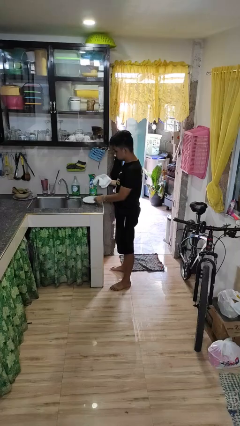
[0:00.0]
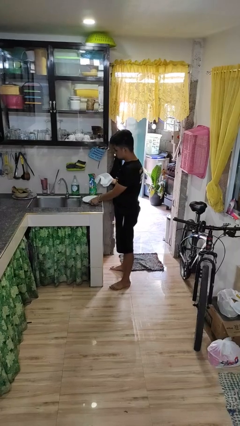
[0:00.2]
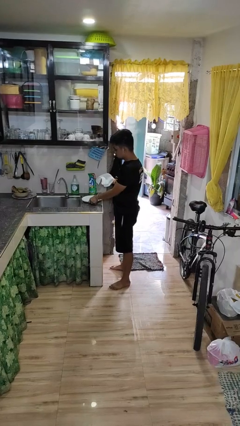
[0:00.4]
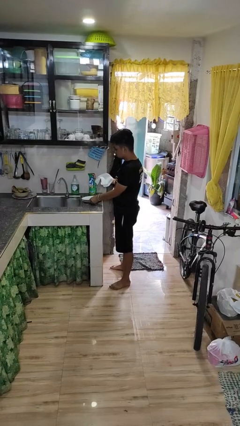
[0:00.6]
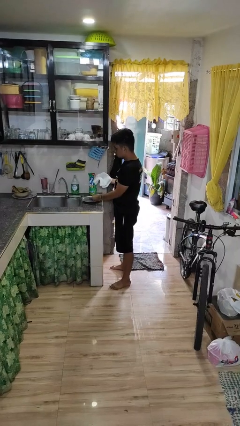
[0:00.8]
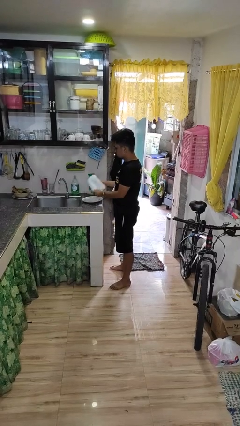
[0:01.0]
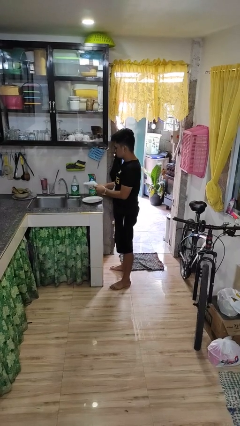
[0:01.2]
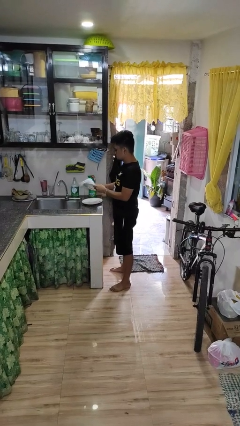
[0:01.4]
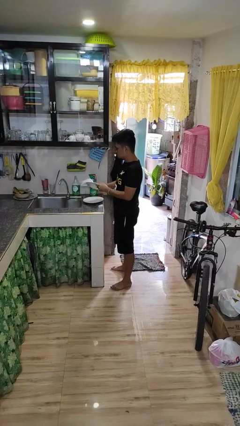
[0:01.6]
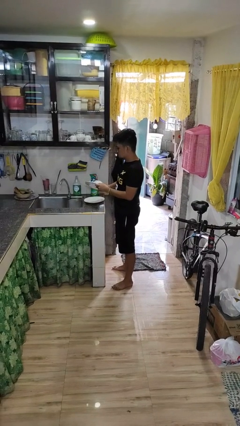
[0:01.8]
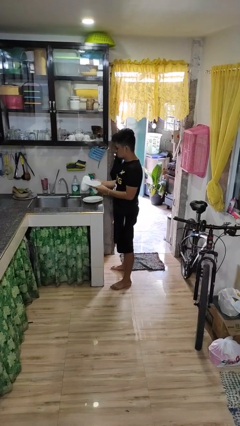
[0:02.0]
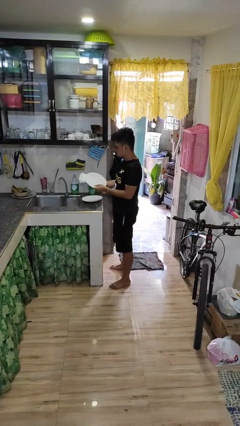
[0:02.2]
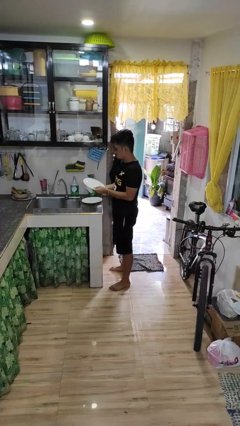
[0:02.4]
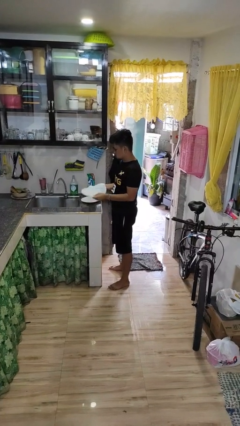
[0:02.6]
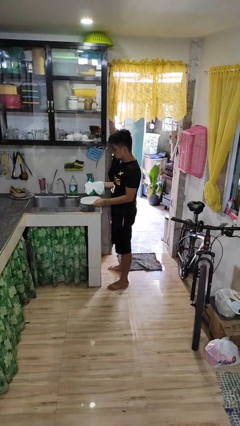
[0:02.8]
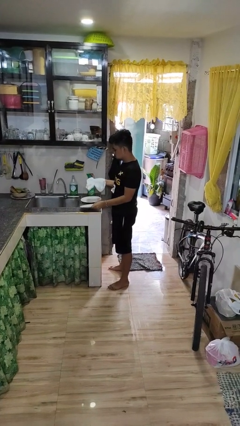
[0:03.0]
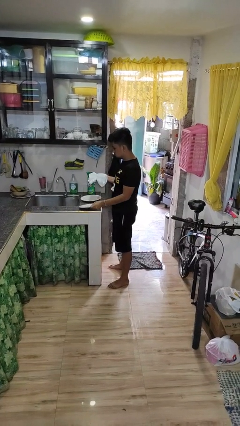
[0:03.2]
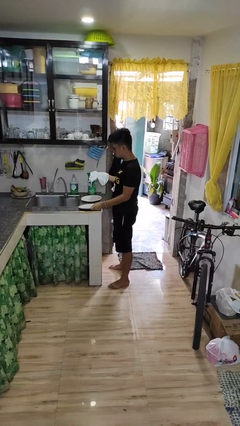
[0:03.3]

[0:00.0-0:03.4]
person dries dish

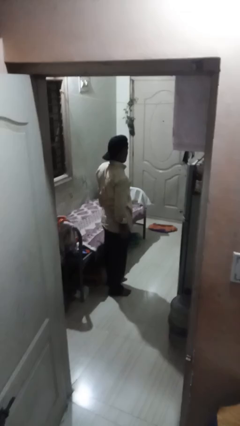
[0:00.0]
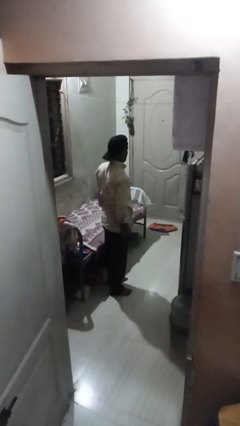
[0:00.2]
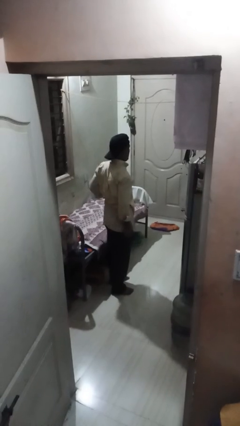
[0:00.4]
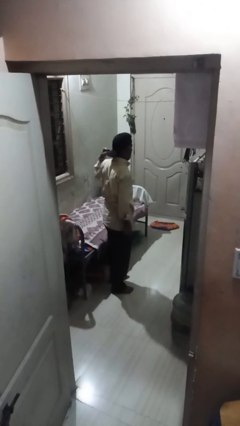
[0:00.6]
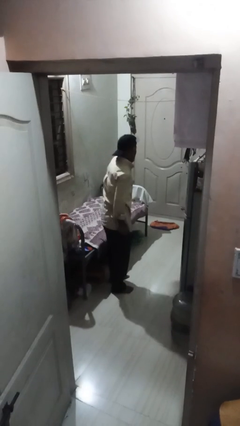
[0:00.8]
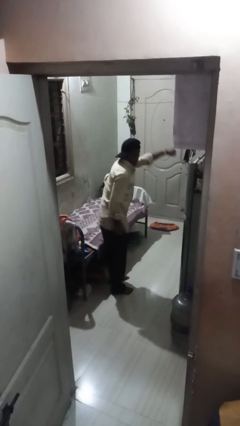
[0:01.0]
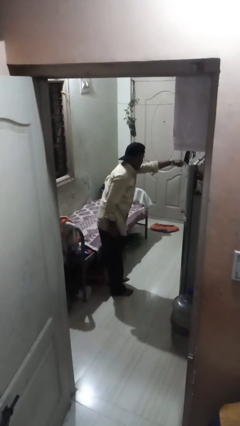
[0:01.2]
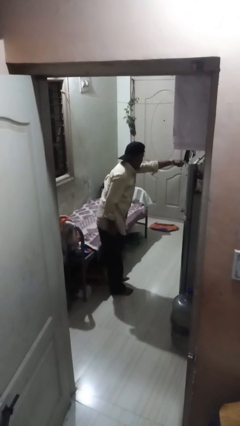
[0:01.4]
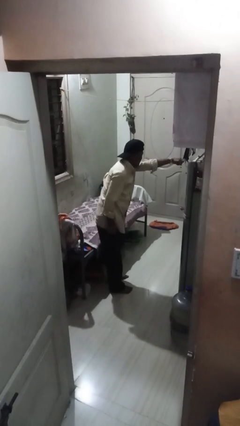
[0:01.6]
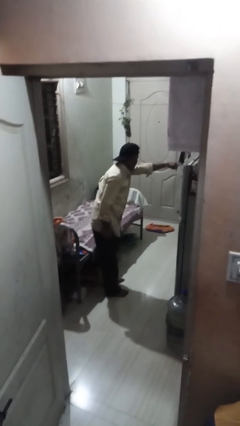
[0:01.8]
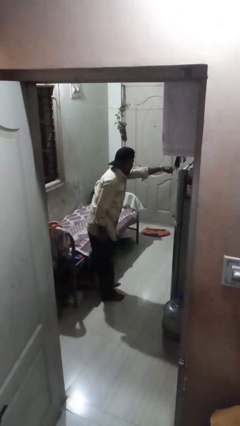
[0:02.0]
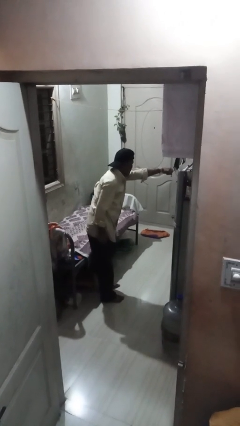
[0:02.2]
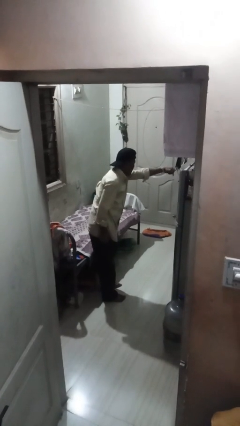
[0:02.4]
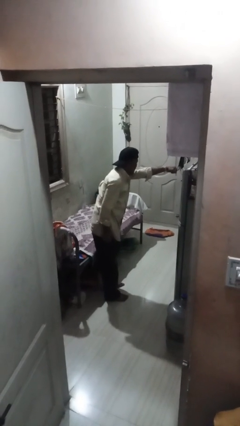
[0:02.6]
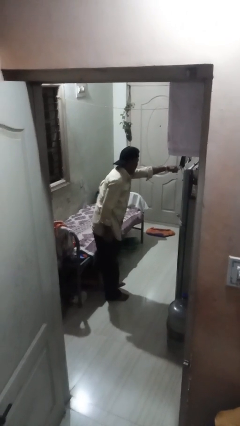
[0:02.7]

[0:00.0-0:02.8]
person punches

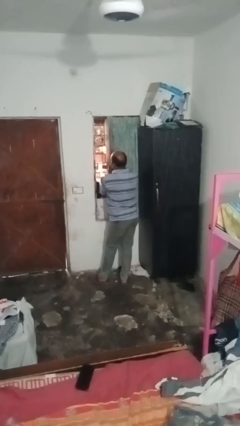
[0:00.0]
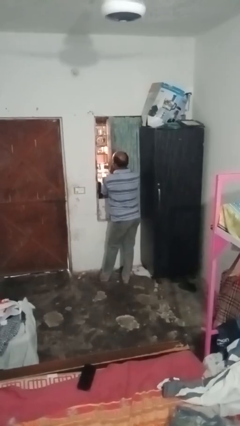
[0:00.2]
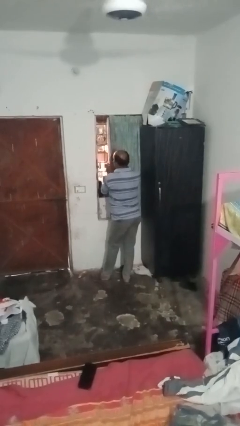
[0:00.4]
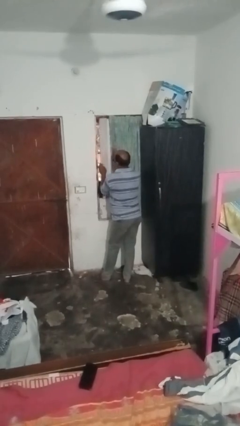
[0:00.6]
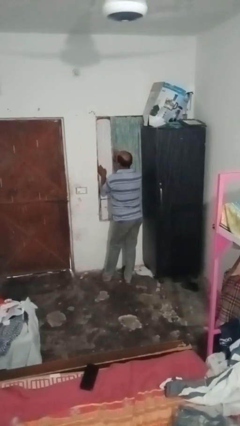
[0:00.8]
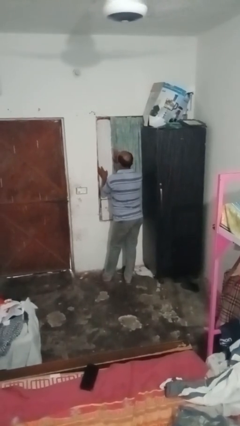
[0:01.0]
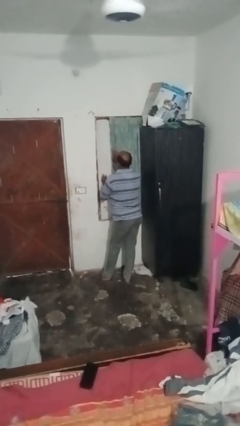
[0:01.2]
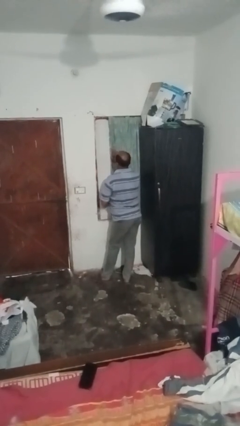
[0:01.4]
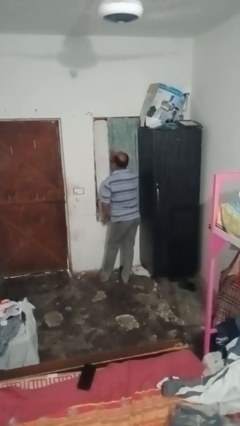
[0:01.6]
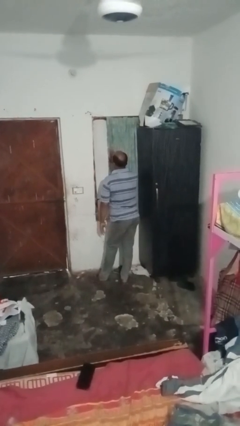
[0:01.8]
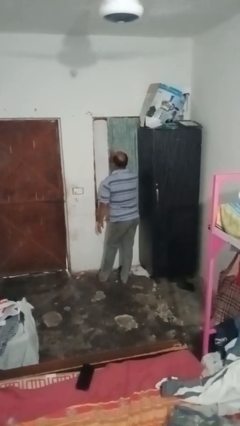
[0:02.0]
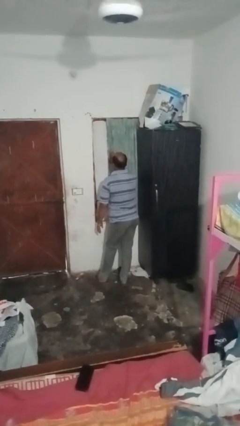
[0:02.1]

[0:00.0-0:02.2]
person closes home window

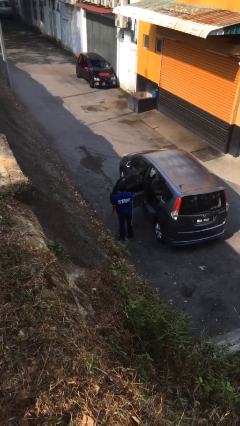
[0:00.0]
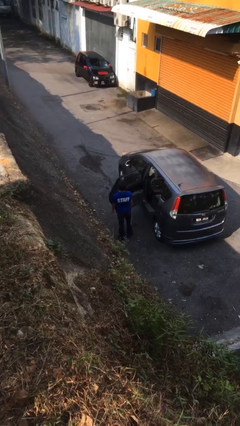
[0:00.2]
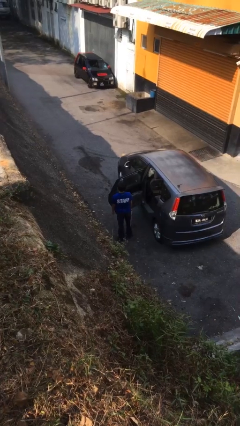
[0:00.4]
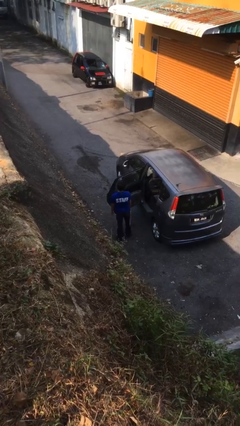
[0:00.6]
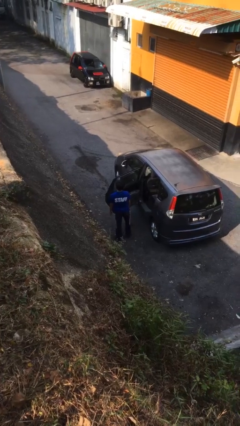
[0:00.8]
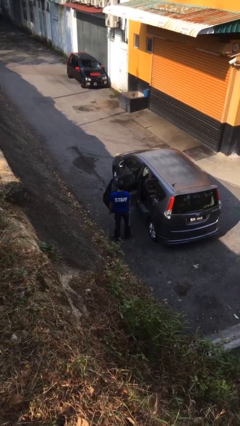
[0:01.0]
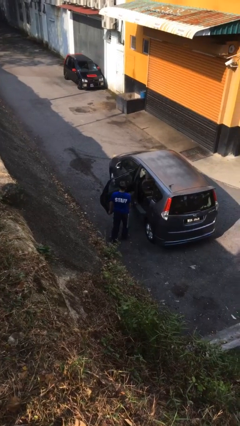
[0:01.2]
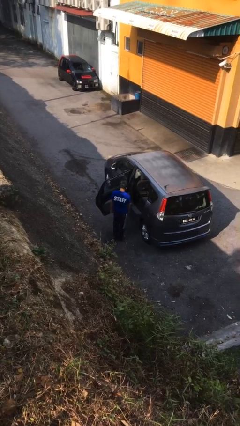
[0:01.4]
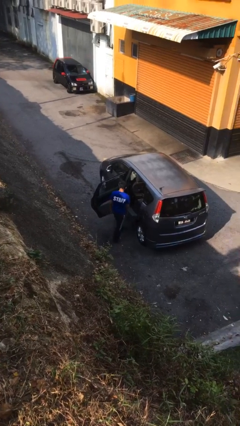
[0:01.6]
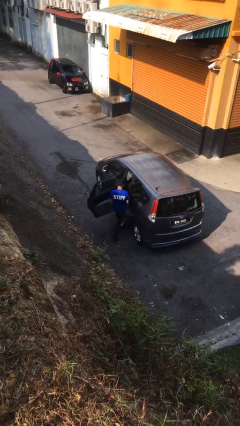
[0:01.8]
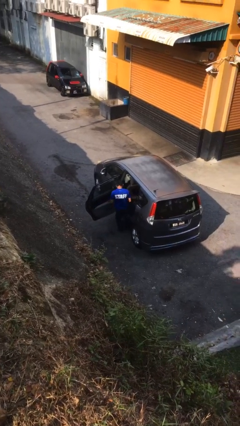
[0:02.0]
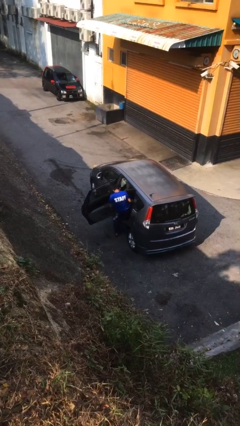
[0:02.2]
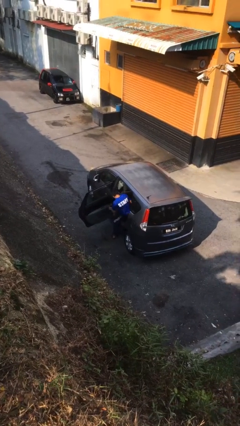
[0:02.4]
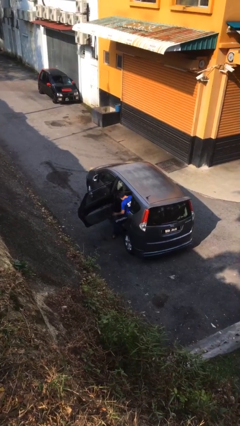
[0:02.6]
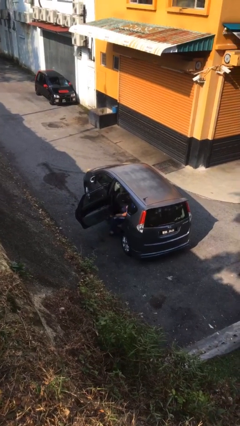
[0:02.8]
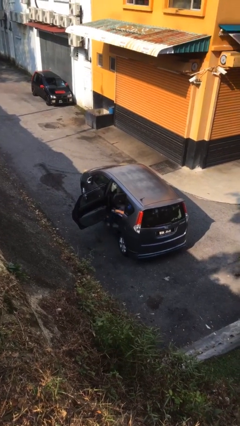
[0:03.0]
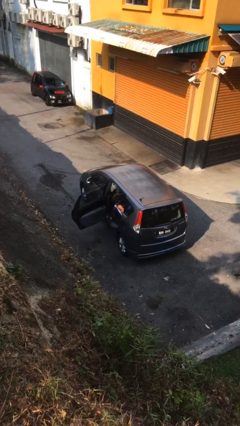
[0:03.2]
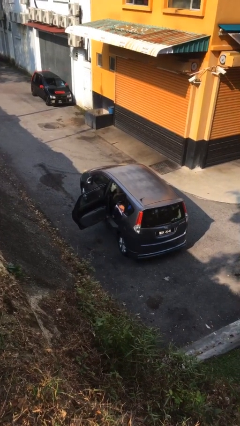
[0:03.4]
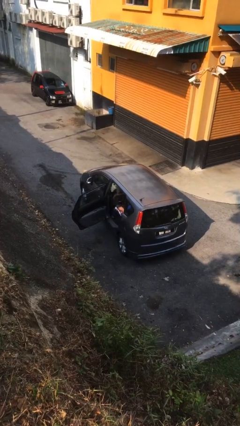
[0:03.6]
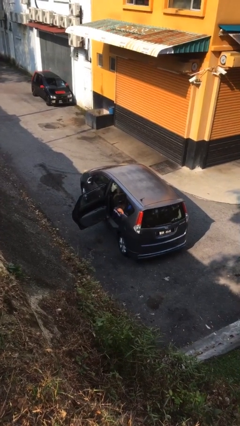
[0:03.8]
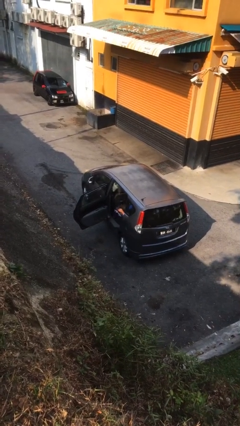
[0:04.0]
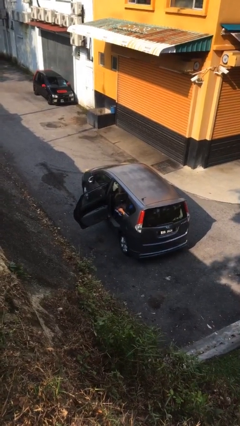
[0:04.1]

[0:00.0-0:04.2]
person enters car

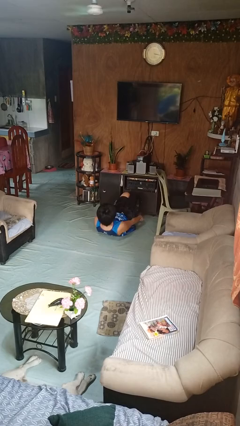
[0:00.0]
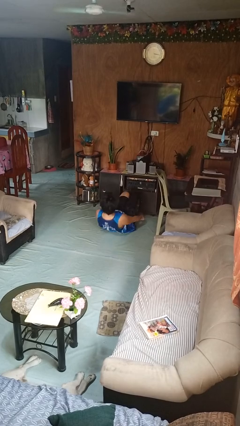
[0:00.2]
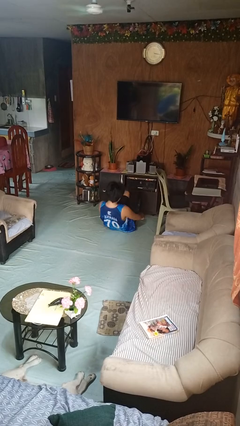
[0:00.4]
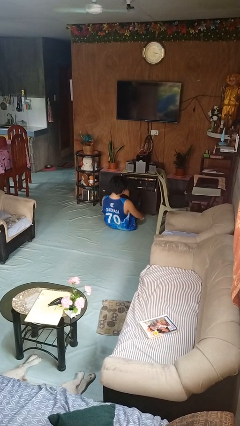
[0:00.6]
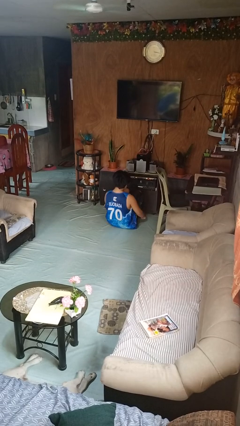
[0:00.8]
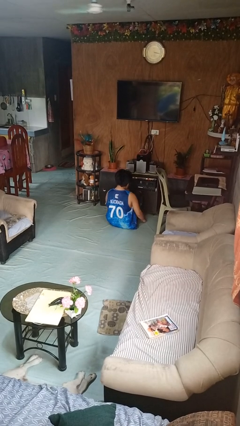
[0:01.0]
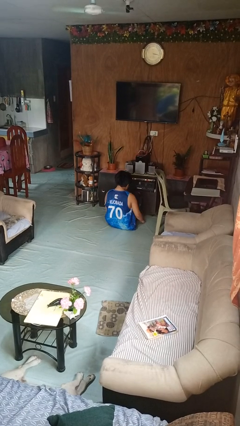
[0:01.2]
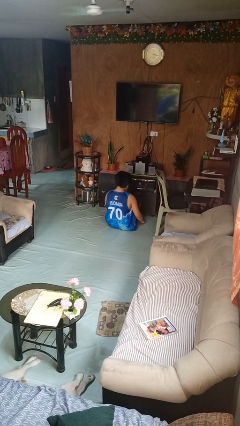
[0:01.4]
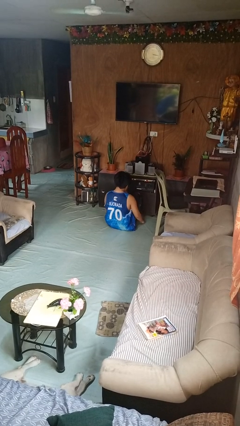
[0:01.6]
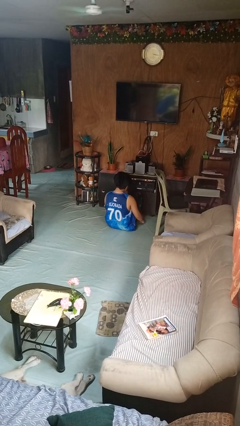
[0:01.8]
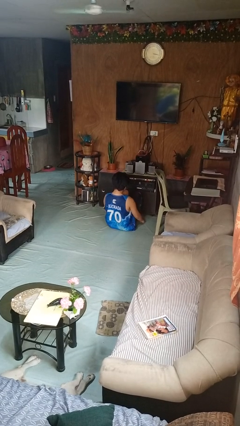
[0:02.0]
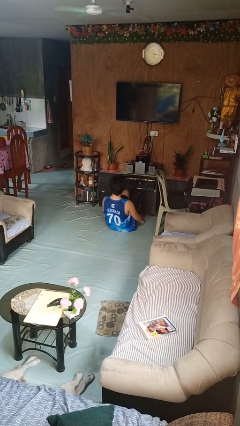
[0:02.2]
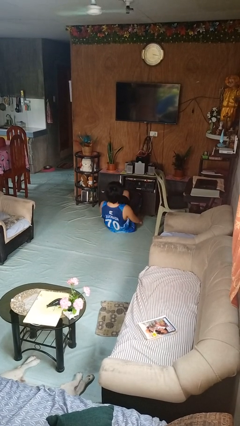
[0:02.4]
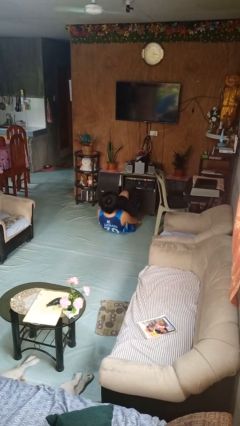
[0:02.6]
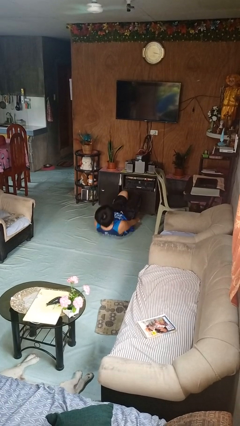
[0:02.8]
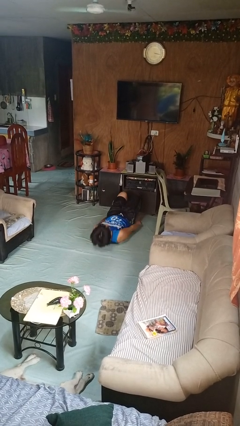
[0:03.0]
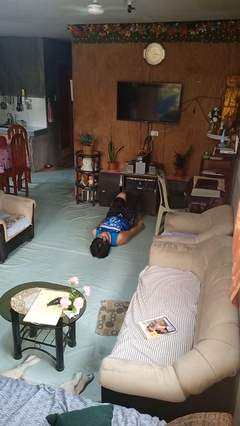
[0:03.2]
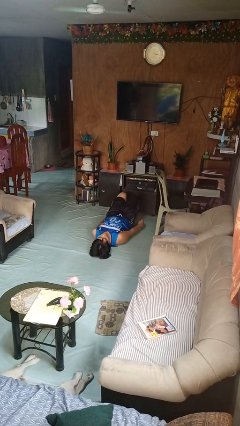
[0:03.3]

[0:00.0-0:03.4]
person exercises with situp

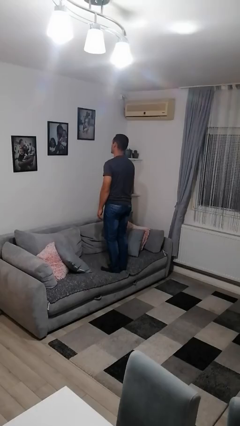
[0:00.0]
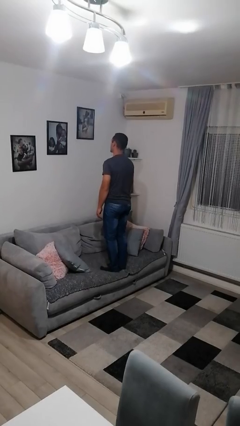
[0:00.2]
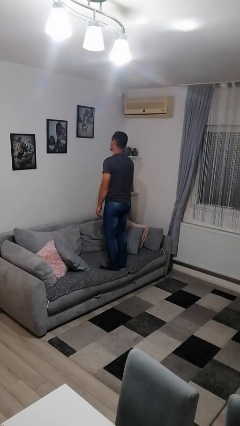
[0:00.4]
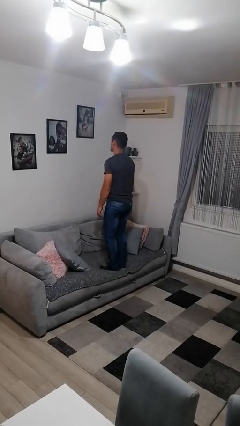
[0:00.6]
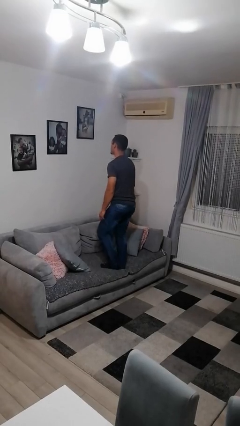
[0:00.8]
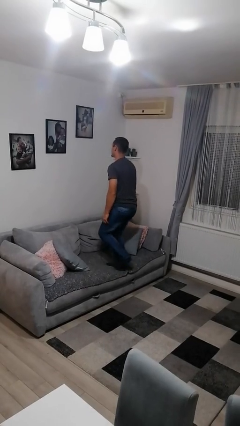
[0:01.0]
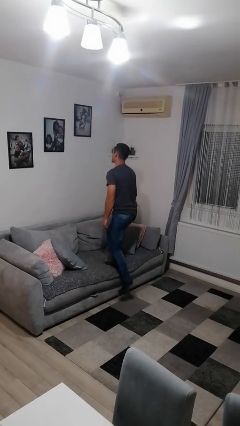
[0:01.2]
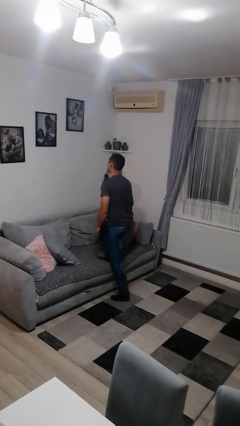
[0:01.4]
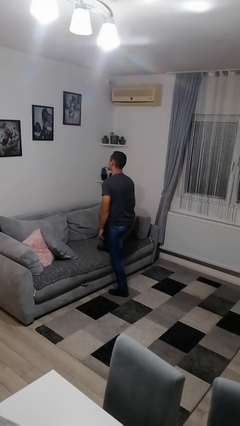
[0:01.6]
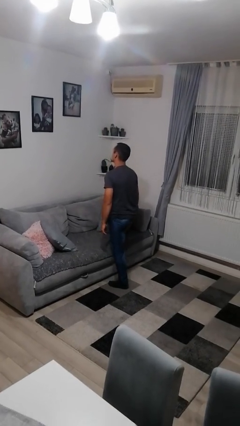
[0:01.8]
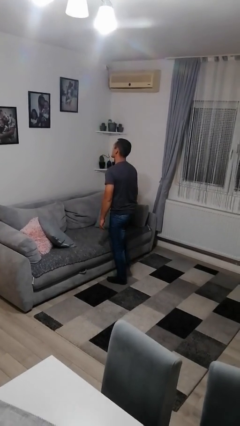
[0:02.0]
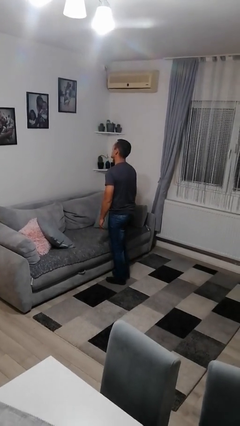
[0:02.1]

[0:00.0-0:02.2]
person climbs off couch
